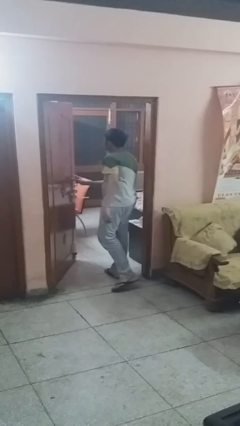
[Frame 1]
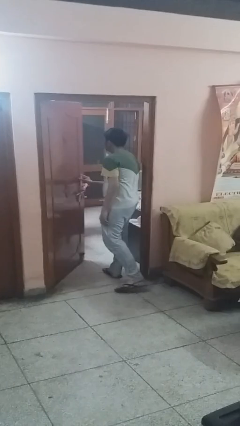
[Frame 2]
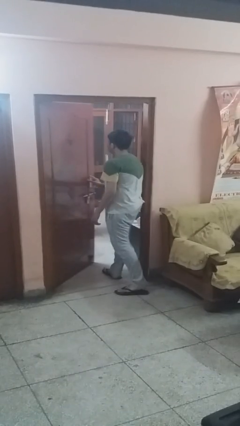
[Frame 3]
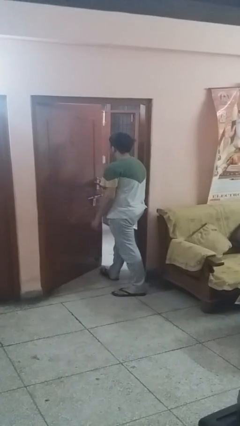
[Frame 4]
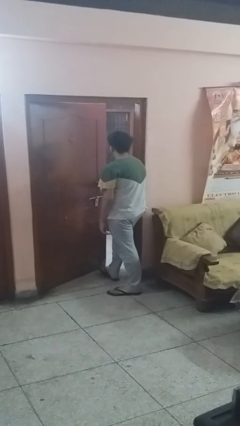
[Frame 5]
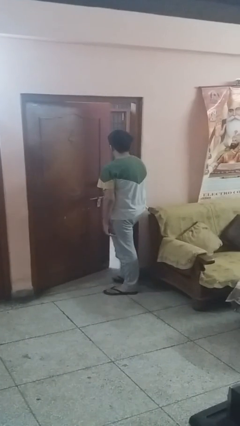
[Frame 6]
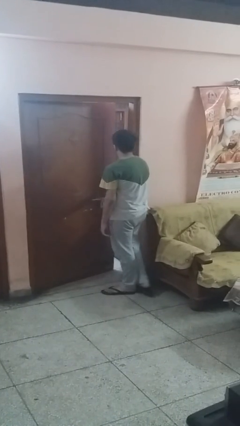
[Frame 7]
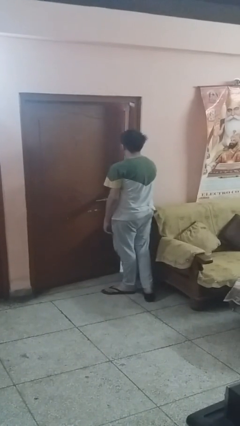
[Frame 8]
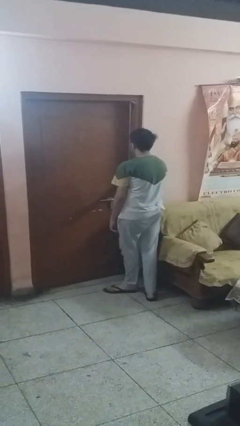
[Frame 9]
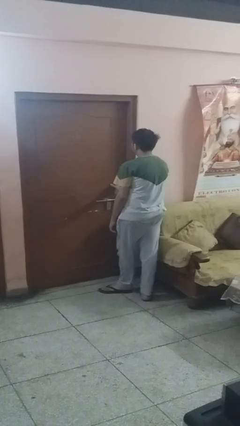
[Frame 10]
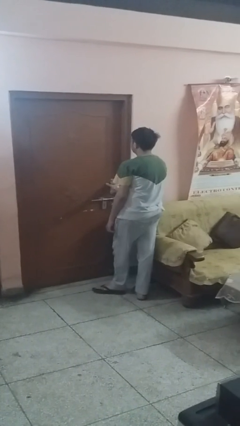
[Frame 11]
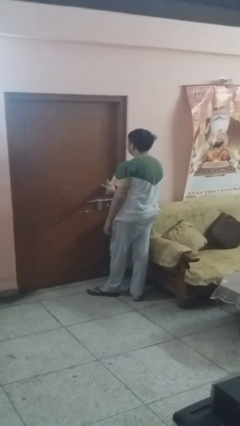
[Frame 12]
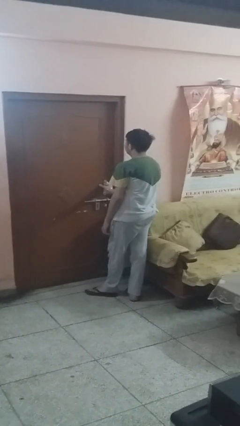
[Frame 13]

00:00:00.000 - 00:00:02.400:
person closes facility door

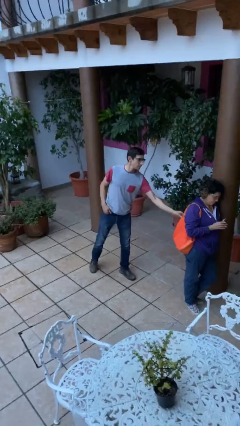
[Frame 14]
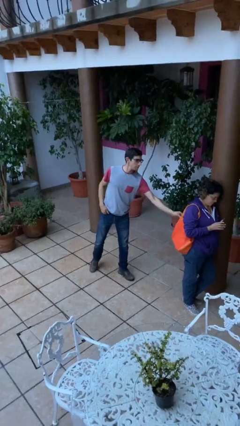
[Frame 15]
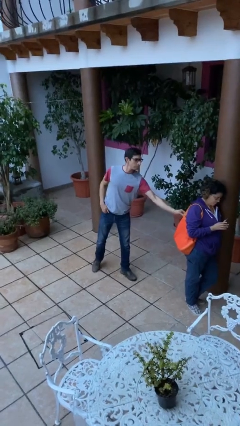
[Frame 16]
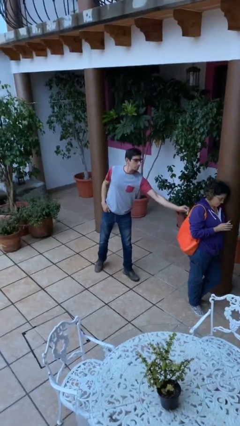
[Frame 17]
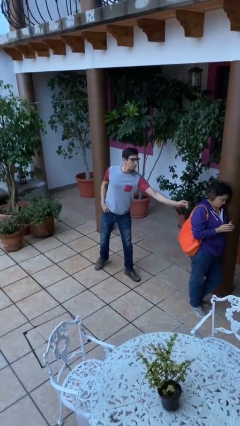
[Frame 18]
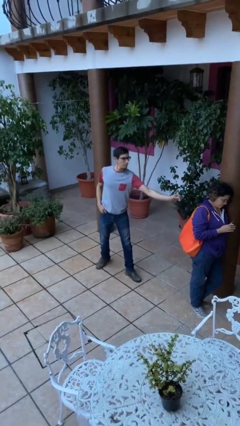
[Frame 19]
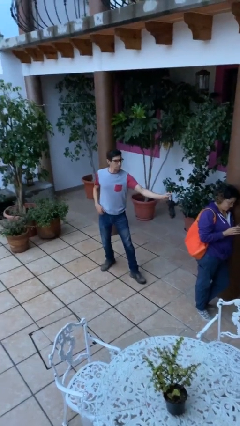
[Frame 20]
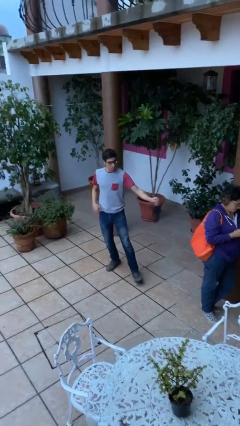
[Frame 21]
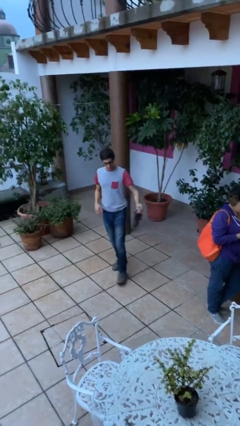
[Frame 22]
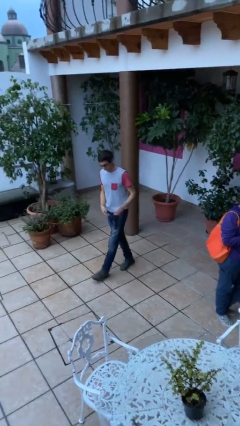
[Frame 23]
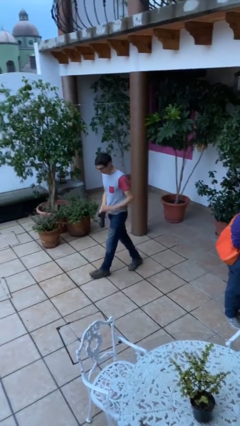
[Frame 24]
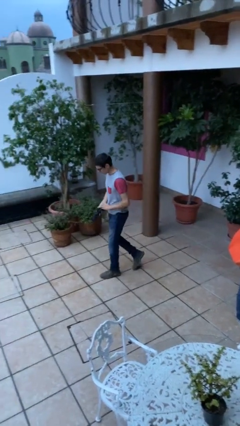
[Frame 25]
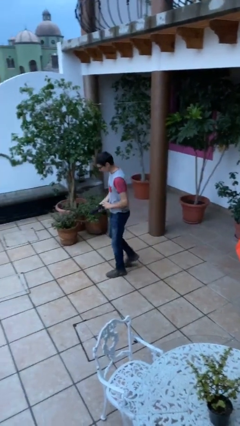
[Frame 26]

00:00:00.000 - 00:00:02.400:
person steals object from person

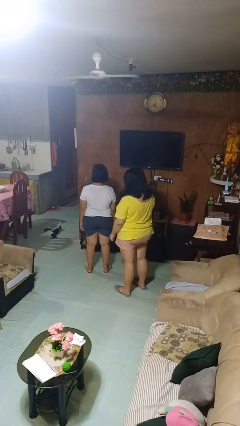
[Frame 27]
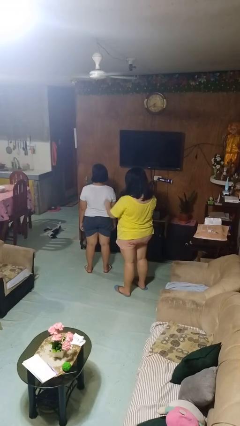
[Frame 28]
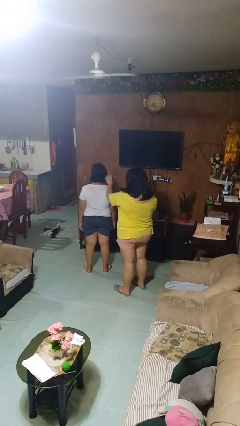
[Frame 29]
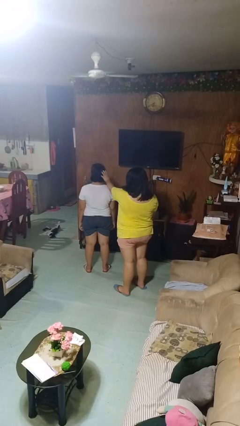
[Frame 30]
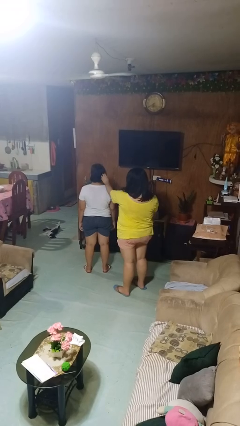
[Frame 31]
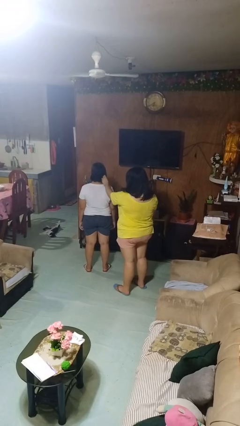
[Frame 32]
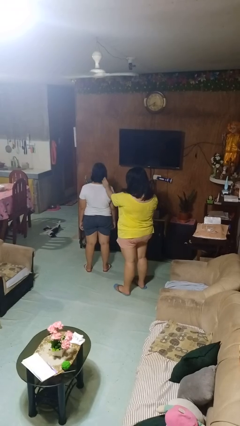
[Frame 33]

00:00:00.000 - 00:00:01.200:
person grabs person by hair

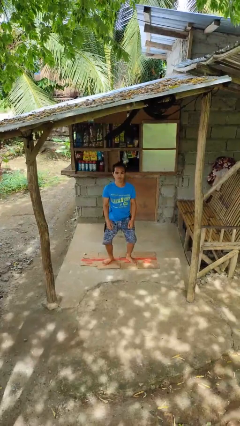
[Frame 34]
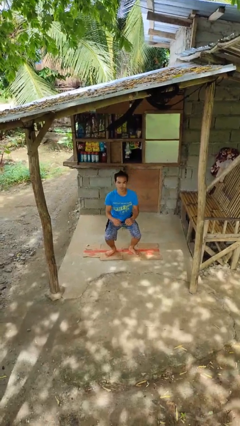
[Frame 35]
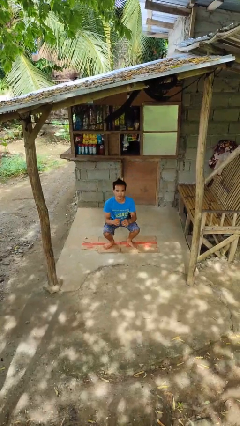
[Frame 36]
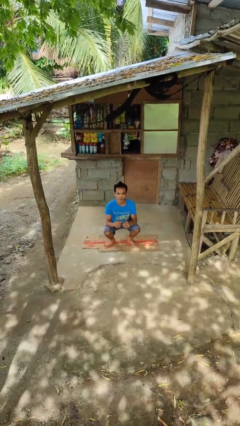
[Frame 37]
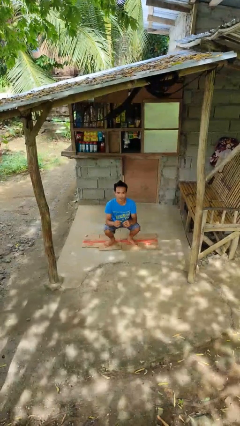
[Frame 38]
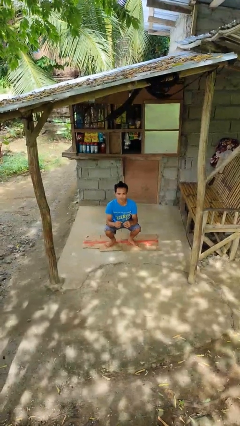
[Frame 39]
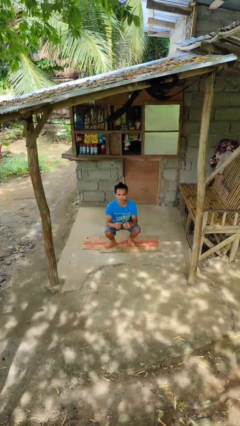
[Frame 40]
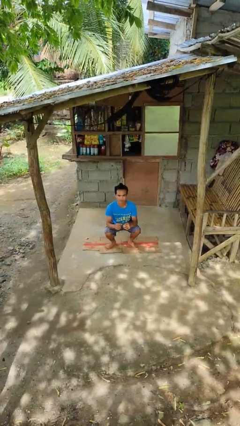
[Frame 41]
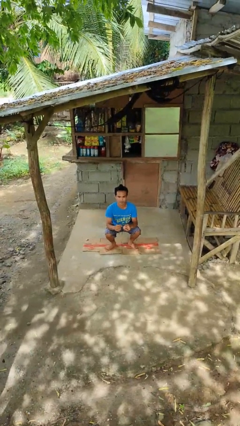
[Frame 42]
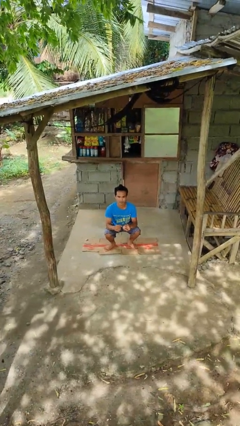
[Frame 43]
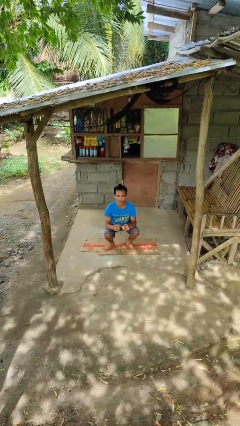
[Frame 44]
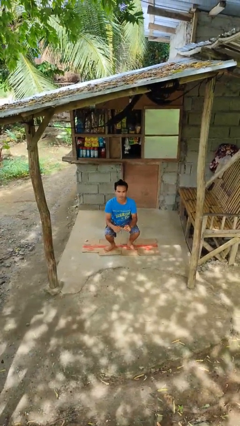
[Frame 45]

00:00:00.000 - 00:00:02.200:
person squats

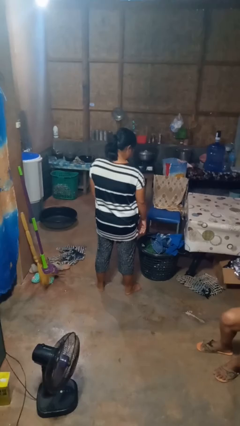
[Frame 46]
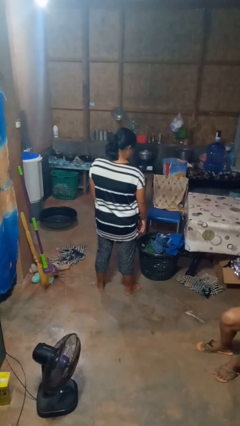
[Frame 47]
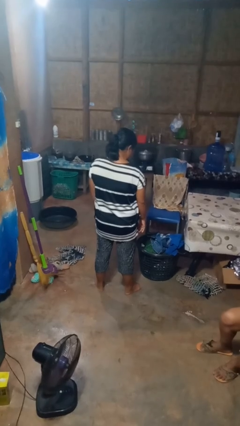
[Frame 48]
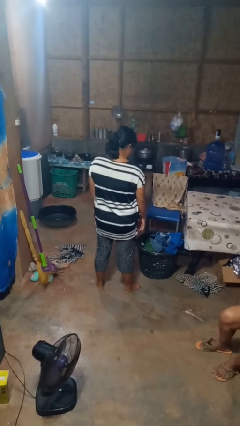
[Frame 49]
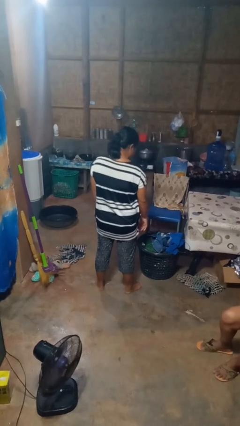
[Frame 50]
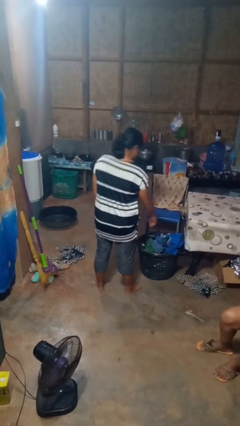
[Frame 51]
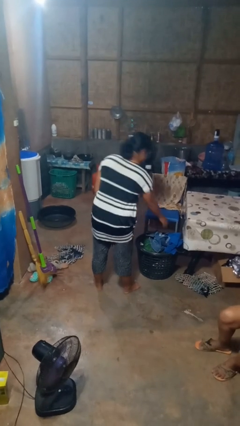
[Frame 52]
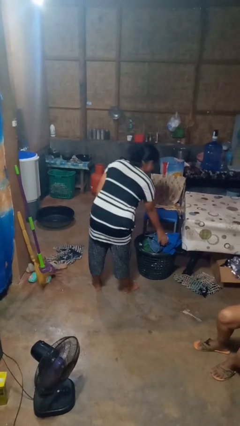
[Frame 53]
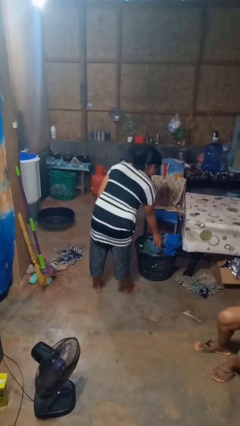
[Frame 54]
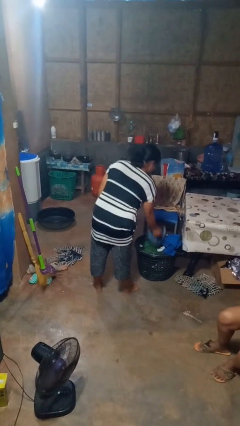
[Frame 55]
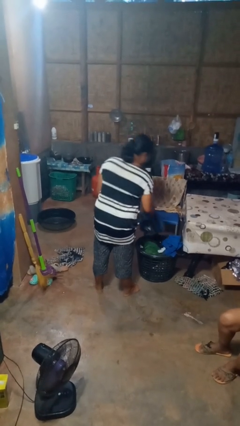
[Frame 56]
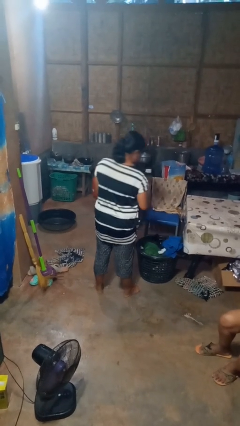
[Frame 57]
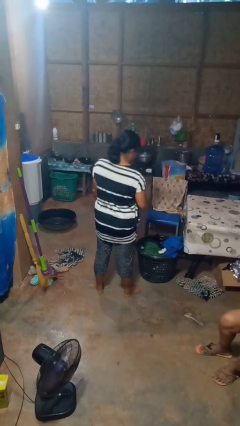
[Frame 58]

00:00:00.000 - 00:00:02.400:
person takes object from basket

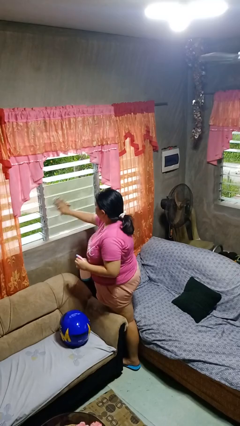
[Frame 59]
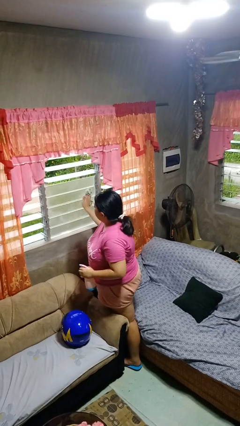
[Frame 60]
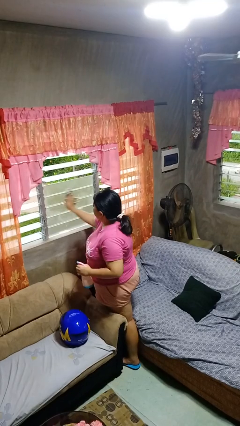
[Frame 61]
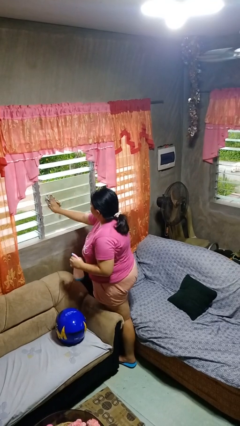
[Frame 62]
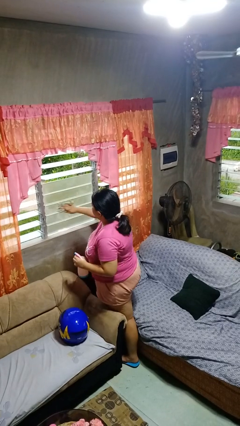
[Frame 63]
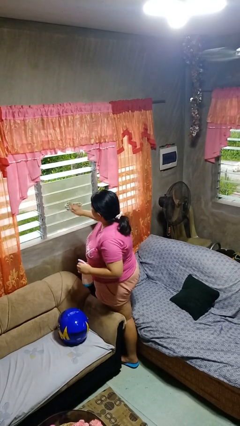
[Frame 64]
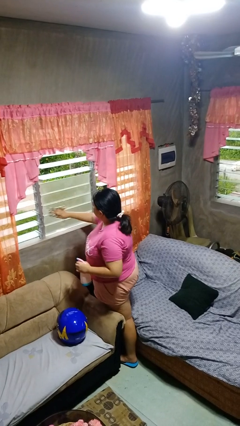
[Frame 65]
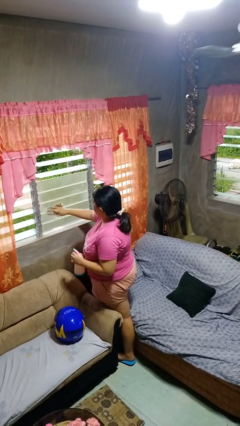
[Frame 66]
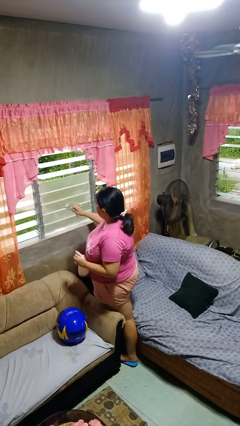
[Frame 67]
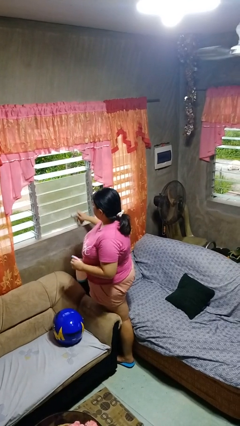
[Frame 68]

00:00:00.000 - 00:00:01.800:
person washes window

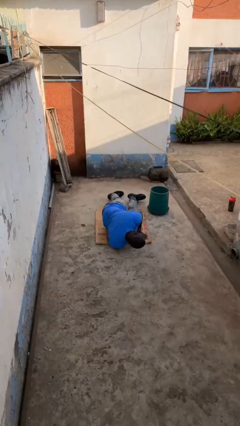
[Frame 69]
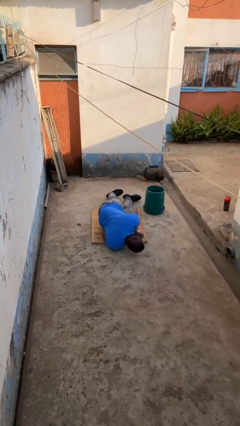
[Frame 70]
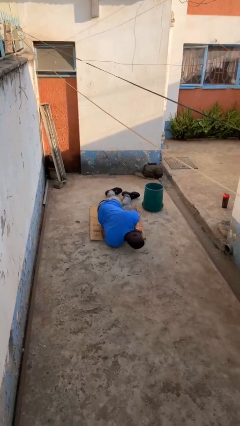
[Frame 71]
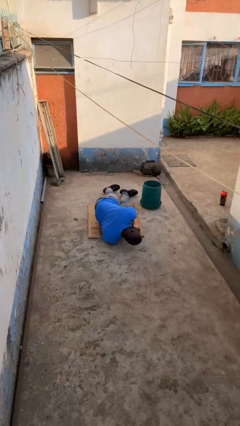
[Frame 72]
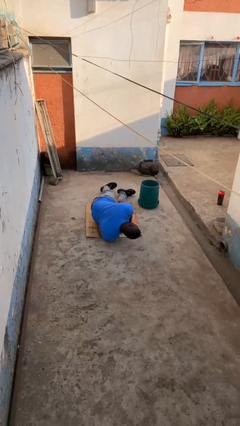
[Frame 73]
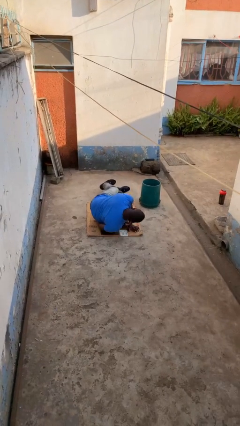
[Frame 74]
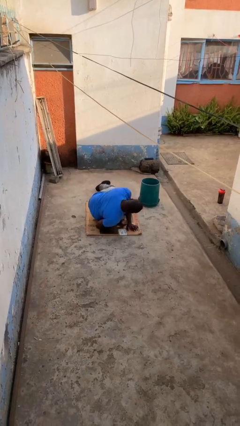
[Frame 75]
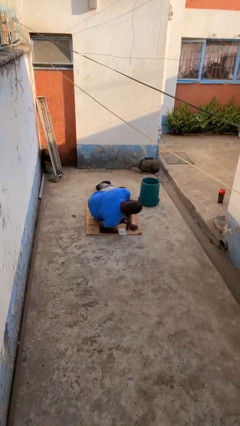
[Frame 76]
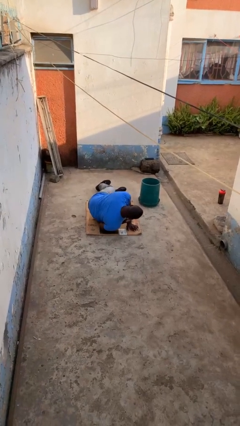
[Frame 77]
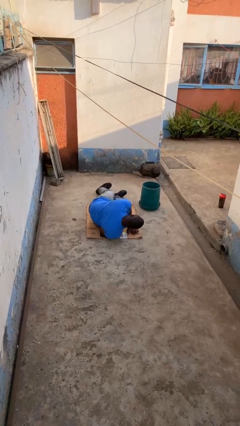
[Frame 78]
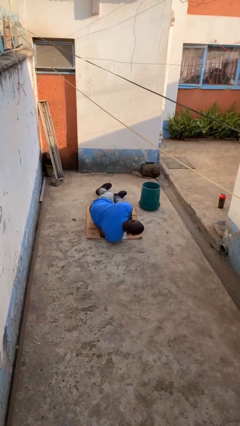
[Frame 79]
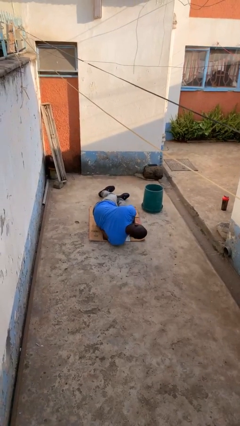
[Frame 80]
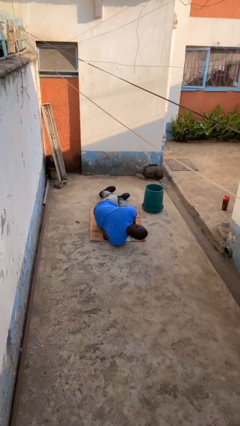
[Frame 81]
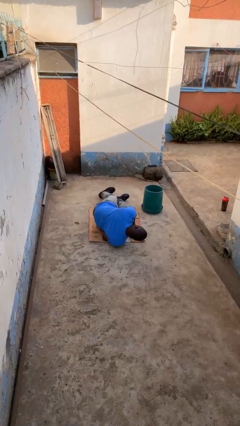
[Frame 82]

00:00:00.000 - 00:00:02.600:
person lies down on floor

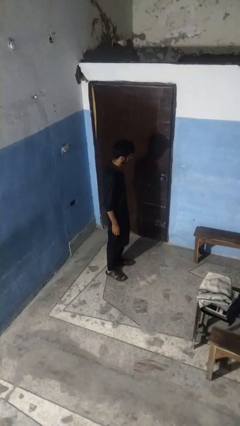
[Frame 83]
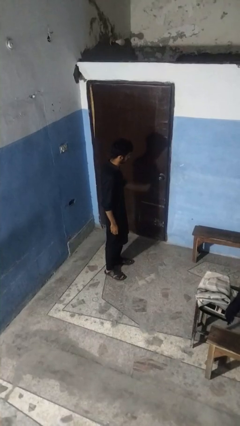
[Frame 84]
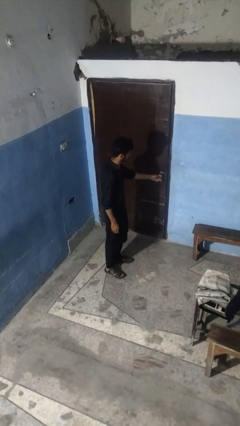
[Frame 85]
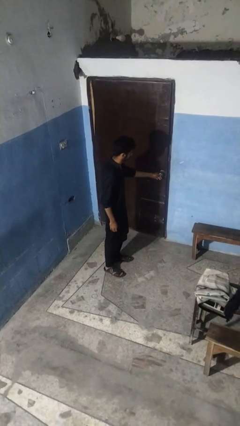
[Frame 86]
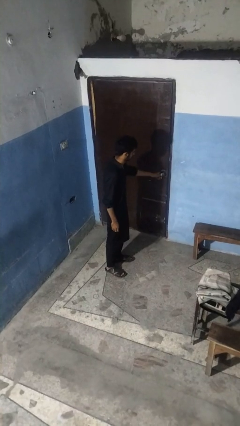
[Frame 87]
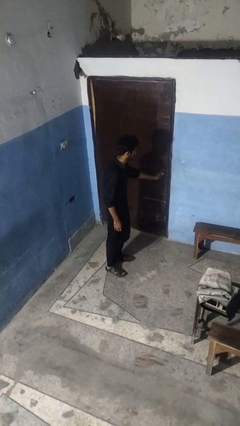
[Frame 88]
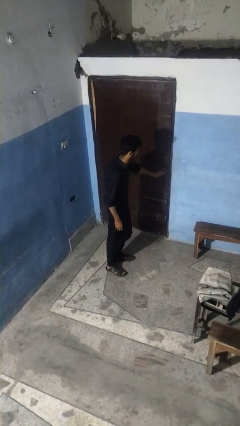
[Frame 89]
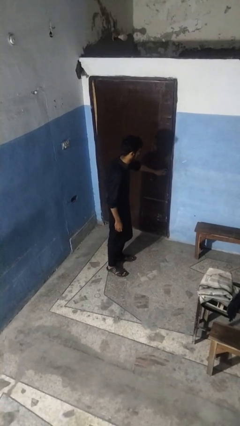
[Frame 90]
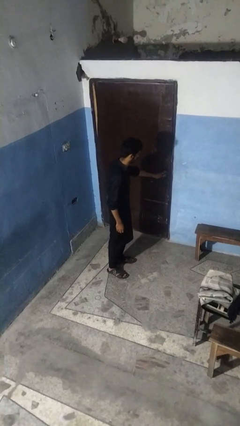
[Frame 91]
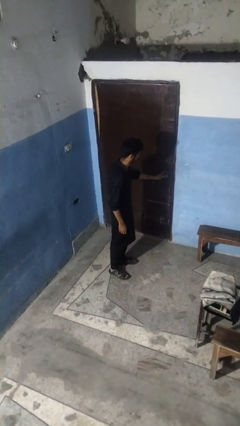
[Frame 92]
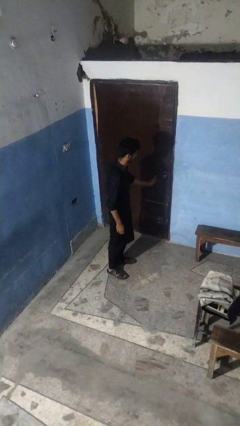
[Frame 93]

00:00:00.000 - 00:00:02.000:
person locks door with keys
